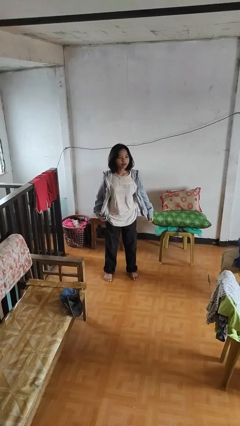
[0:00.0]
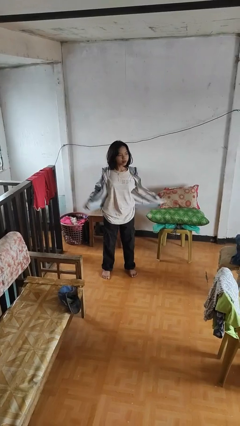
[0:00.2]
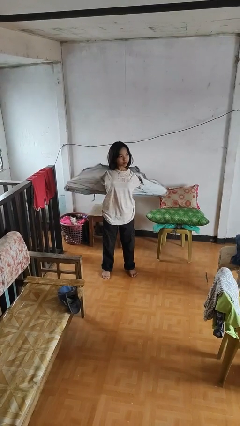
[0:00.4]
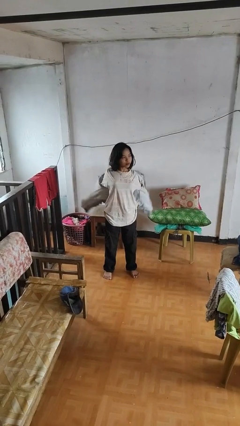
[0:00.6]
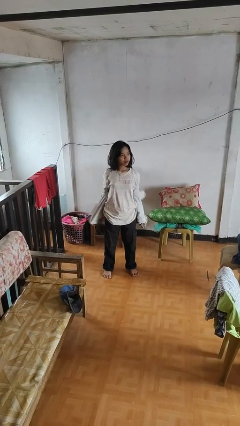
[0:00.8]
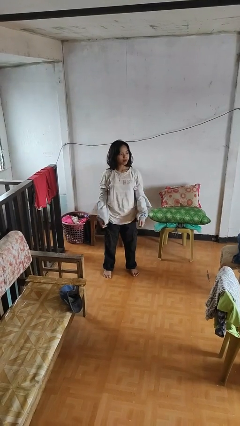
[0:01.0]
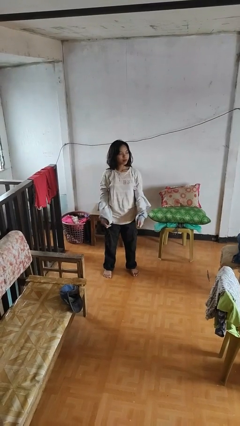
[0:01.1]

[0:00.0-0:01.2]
person takes off jacket

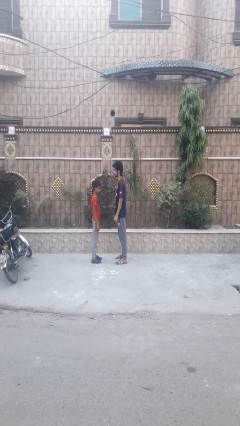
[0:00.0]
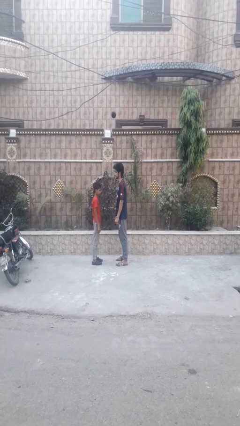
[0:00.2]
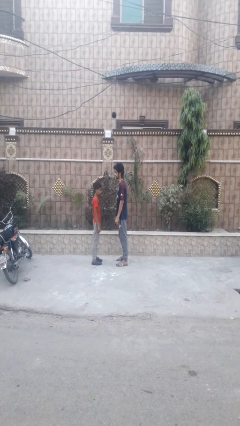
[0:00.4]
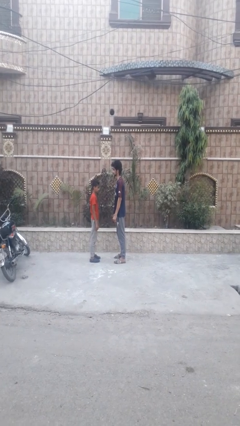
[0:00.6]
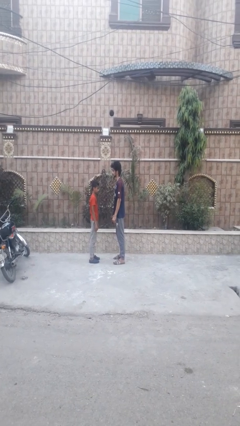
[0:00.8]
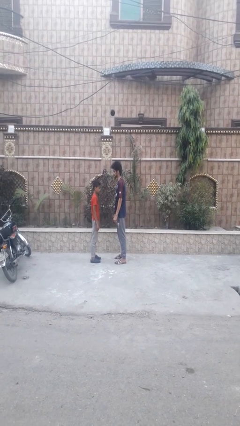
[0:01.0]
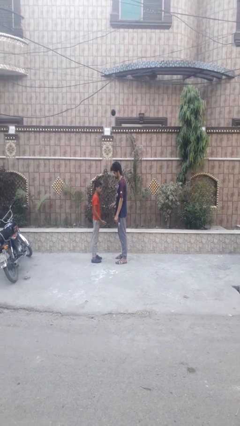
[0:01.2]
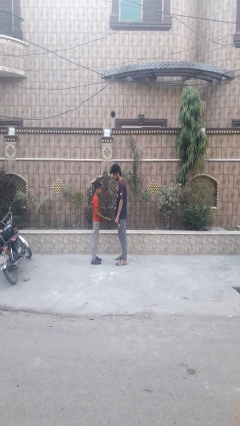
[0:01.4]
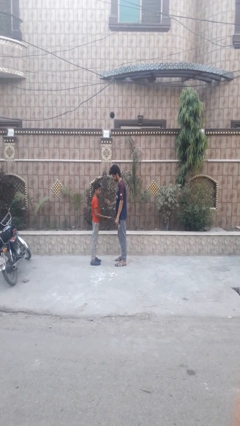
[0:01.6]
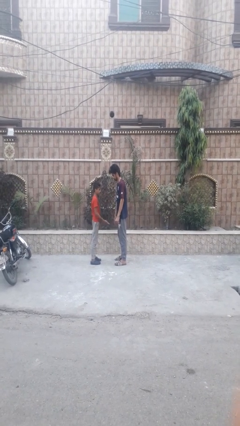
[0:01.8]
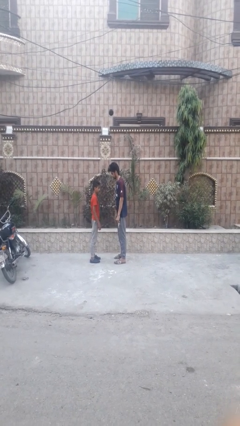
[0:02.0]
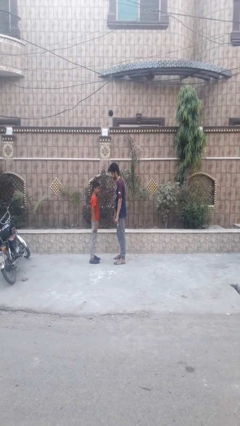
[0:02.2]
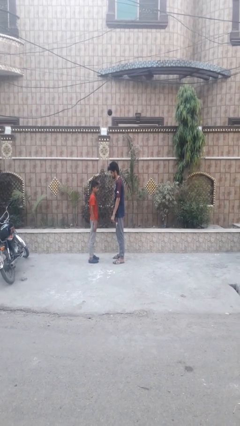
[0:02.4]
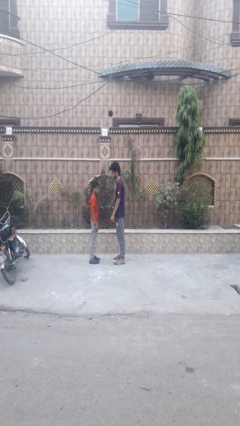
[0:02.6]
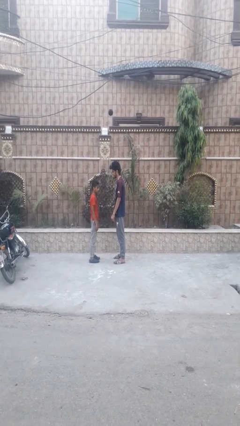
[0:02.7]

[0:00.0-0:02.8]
person highfives hand

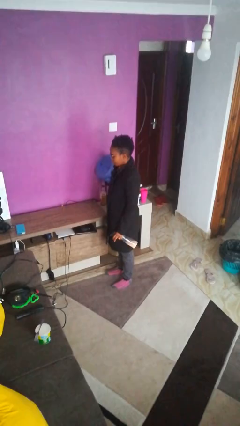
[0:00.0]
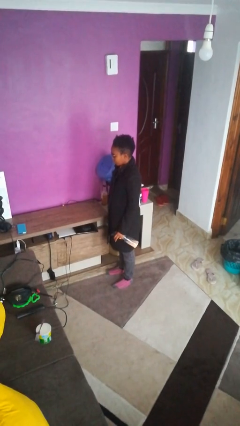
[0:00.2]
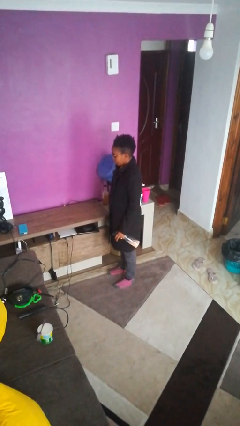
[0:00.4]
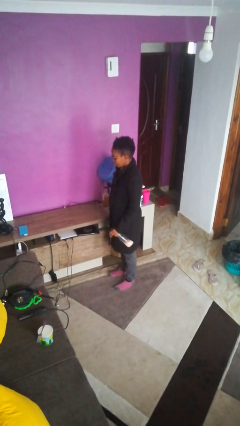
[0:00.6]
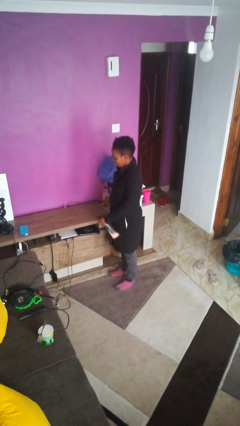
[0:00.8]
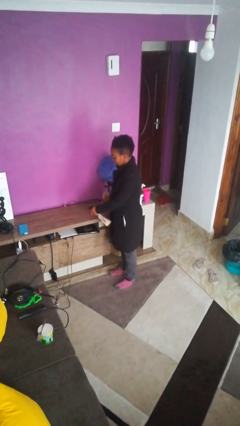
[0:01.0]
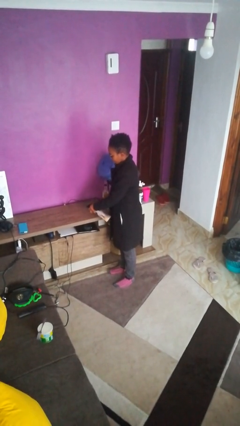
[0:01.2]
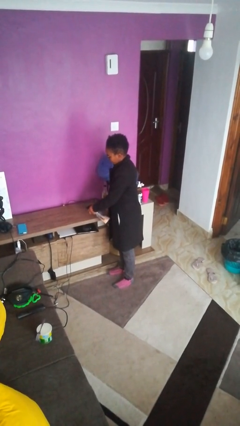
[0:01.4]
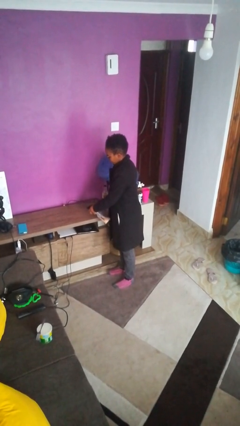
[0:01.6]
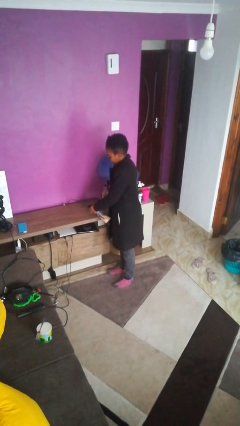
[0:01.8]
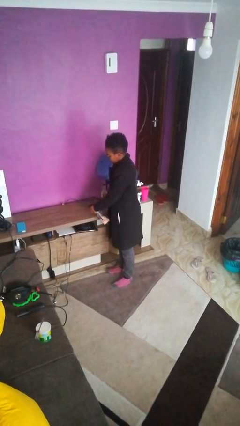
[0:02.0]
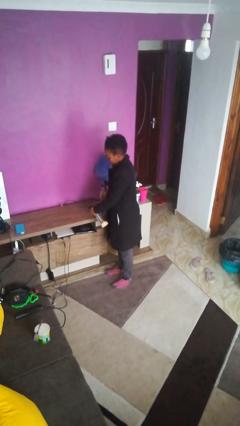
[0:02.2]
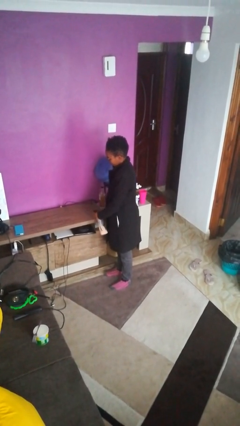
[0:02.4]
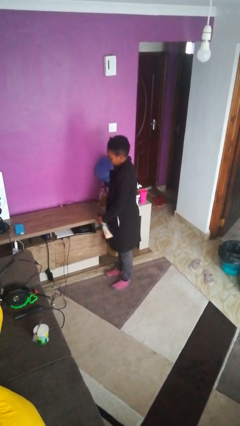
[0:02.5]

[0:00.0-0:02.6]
person sprays from bottle

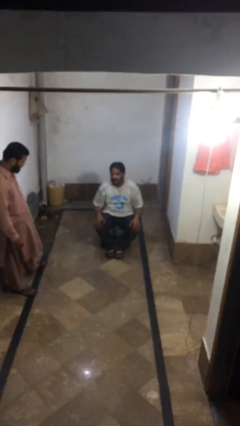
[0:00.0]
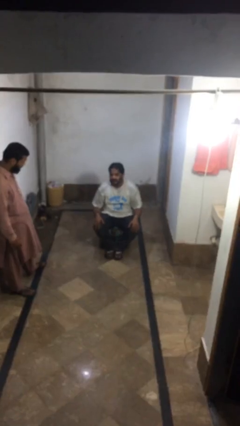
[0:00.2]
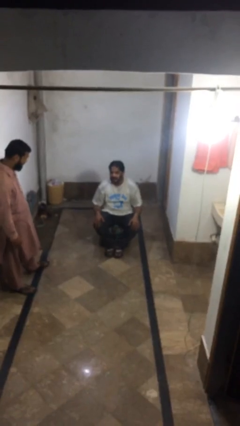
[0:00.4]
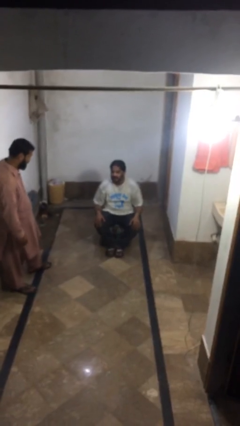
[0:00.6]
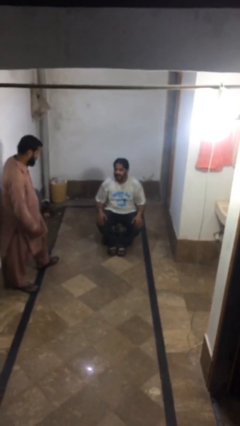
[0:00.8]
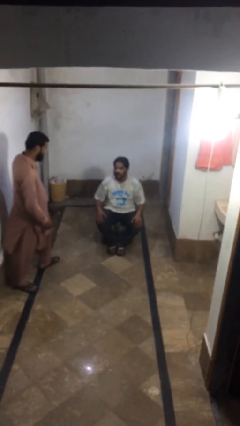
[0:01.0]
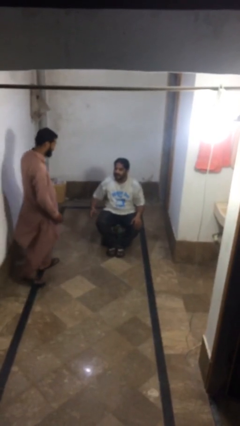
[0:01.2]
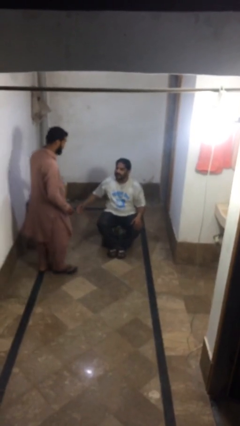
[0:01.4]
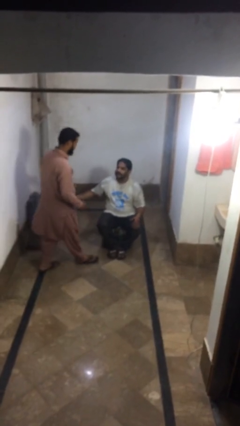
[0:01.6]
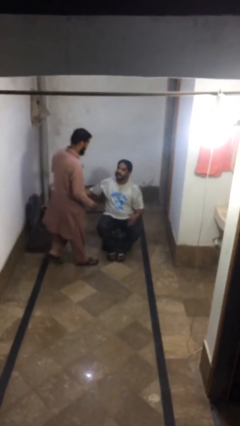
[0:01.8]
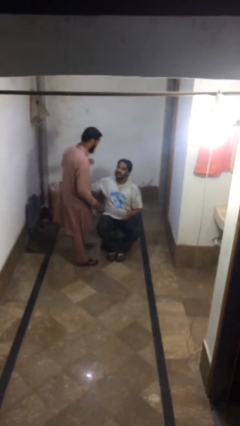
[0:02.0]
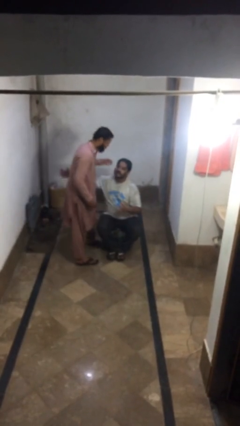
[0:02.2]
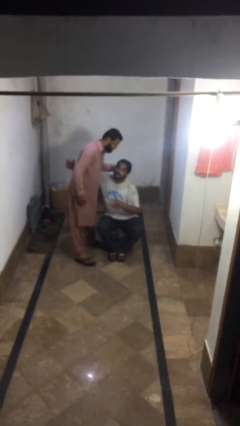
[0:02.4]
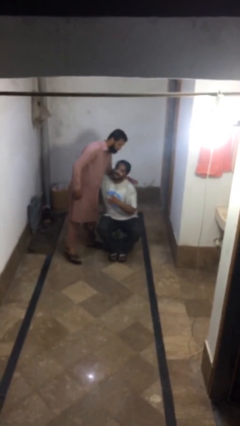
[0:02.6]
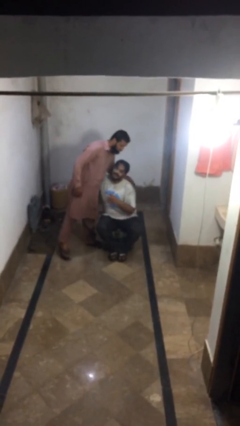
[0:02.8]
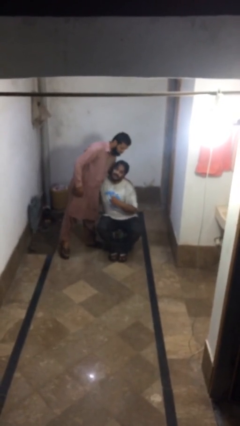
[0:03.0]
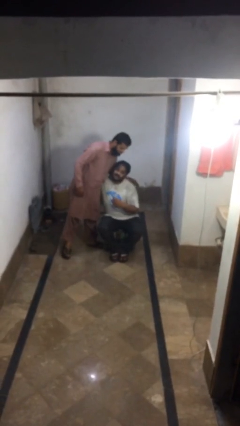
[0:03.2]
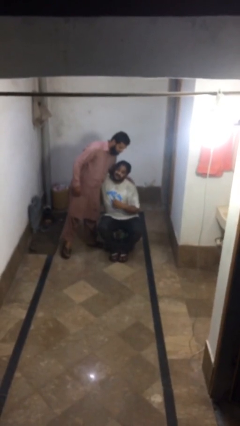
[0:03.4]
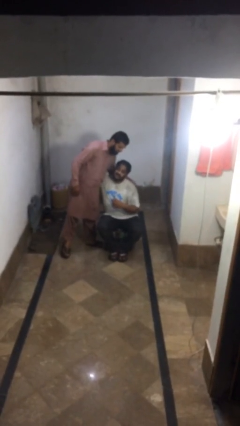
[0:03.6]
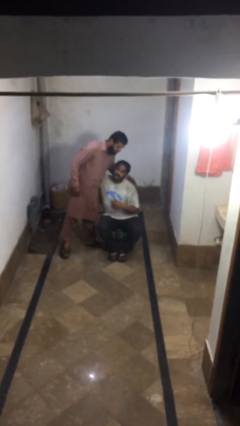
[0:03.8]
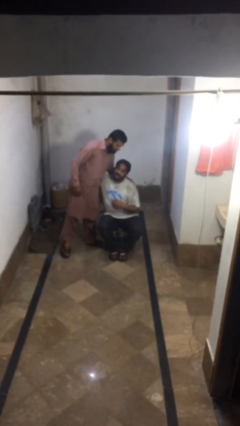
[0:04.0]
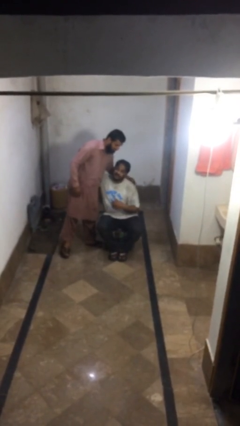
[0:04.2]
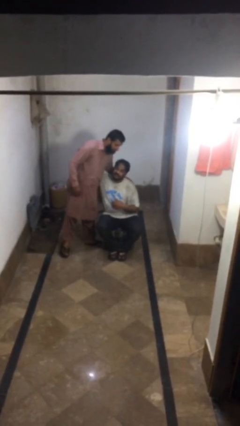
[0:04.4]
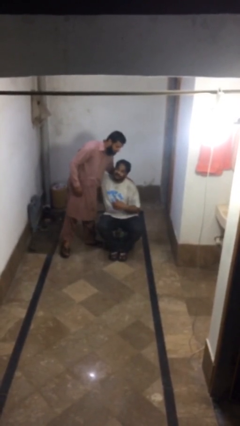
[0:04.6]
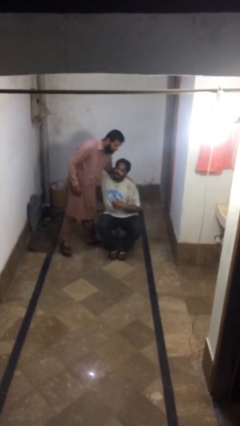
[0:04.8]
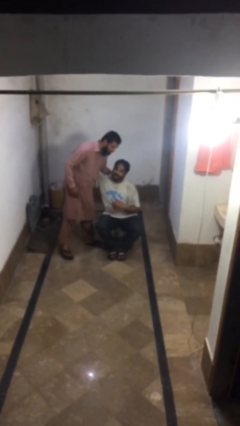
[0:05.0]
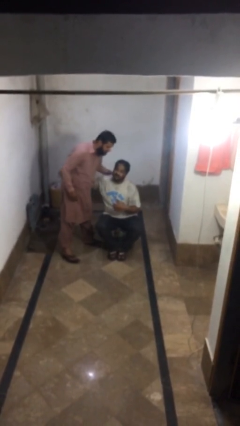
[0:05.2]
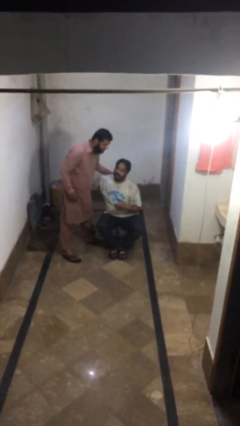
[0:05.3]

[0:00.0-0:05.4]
person embraces person

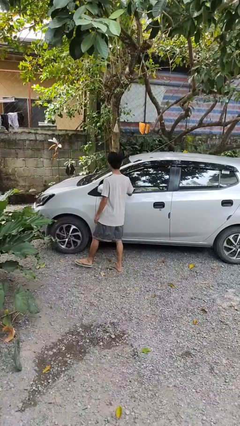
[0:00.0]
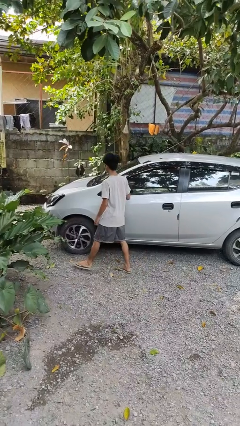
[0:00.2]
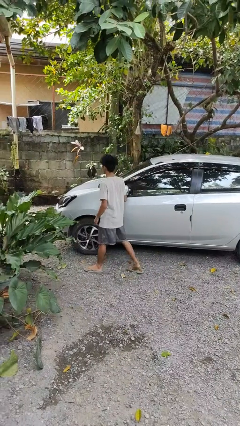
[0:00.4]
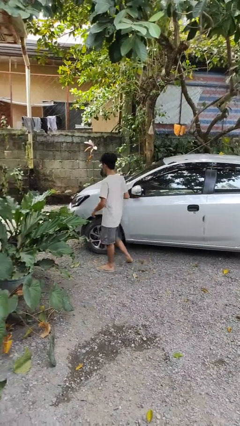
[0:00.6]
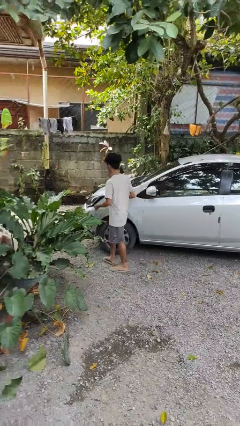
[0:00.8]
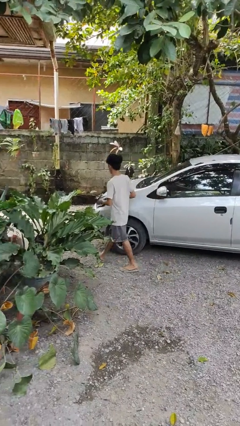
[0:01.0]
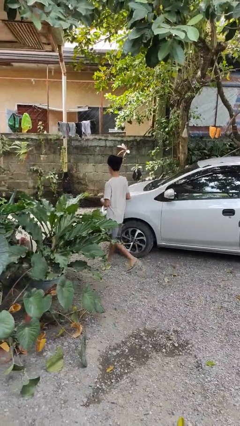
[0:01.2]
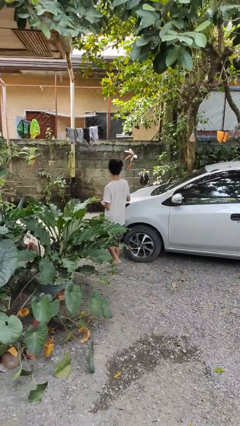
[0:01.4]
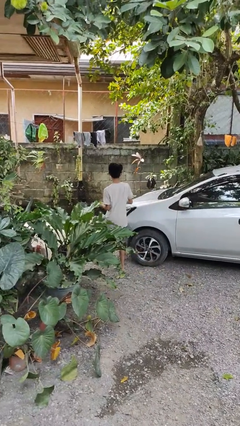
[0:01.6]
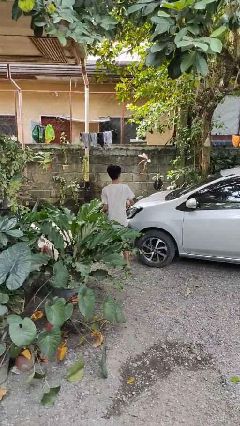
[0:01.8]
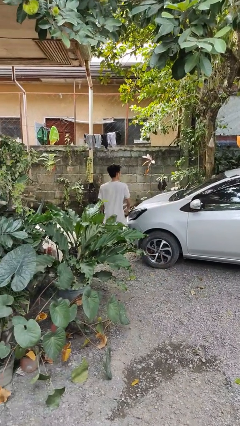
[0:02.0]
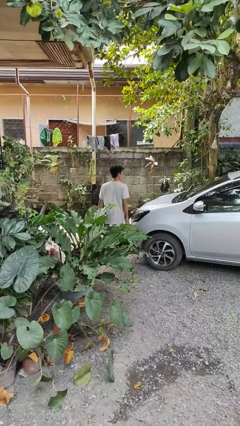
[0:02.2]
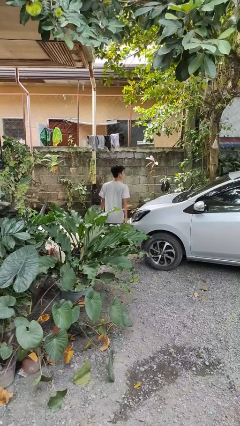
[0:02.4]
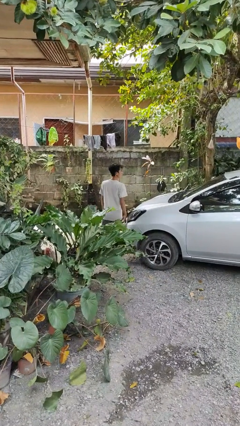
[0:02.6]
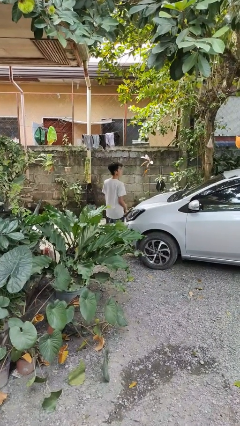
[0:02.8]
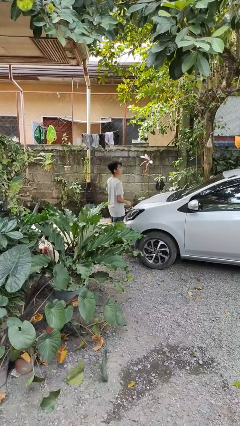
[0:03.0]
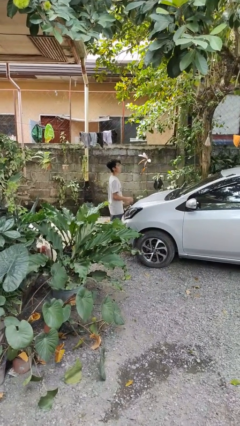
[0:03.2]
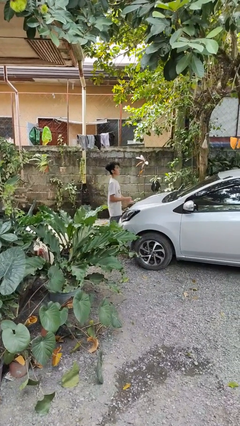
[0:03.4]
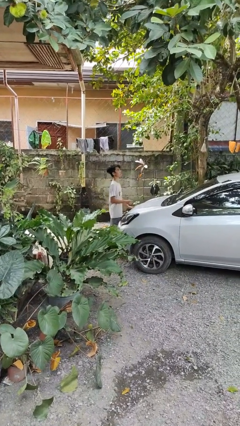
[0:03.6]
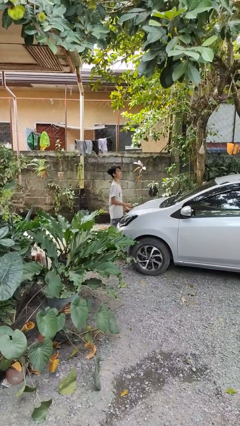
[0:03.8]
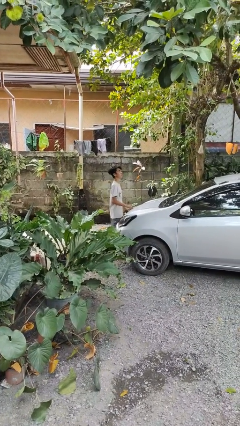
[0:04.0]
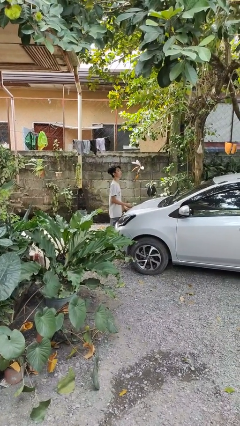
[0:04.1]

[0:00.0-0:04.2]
person walks around car

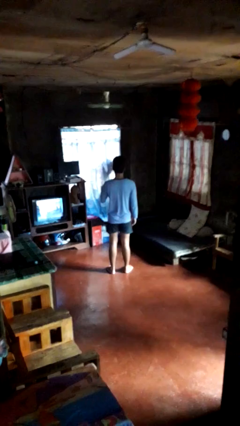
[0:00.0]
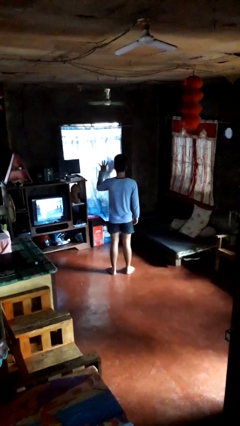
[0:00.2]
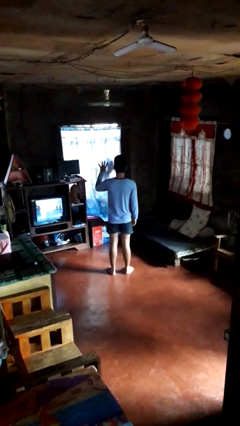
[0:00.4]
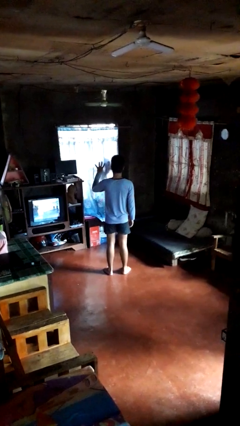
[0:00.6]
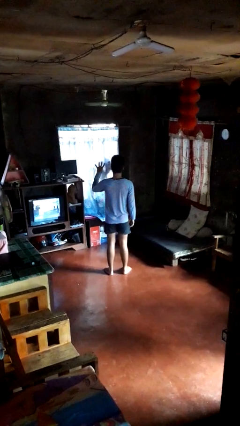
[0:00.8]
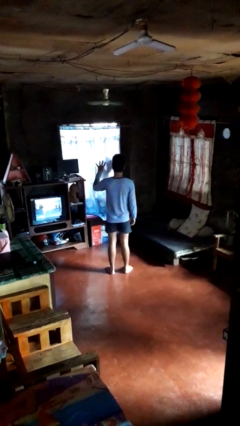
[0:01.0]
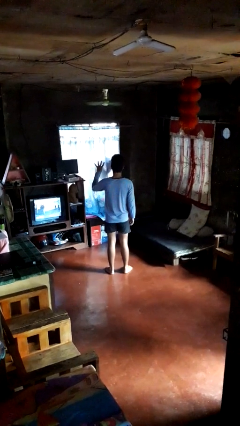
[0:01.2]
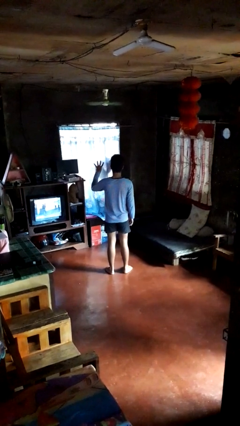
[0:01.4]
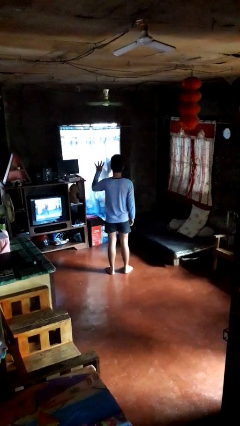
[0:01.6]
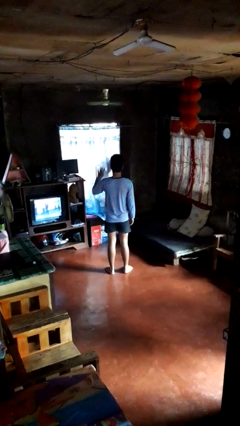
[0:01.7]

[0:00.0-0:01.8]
person gestures number four
